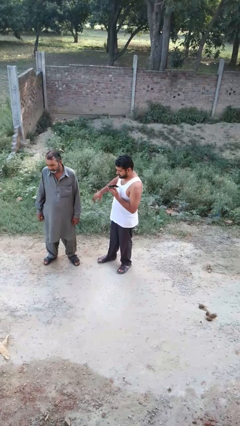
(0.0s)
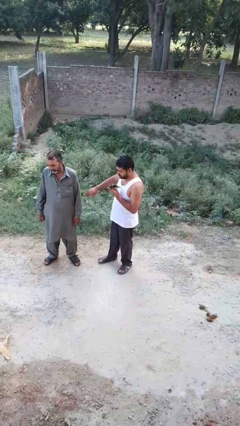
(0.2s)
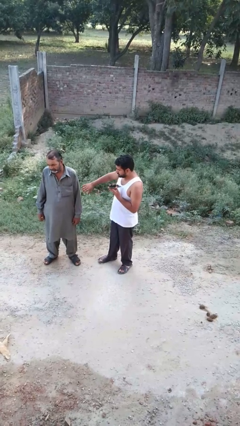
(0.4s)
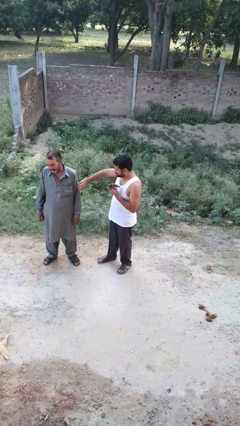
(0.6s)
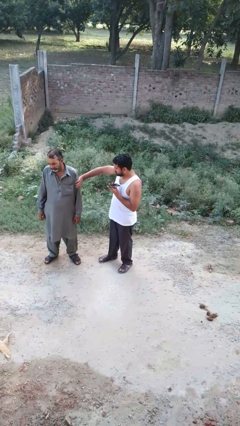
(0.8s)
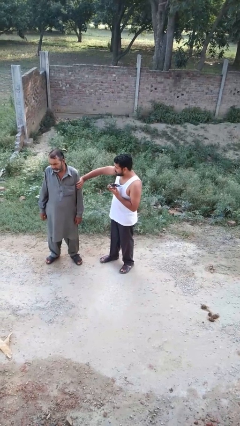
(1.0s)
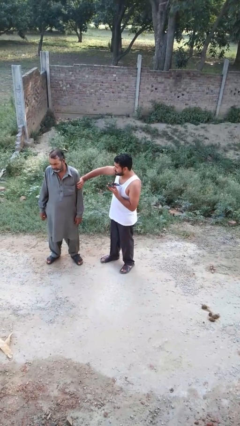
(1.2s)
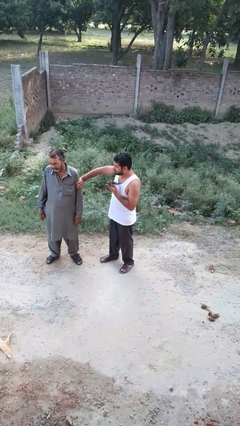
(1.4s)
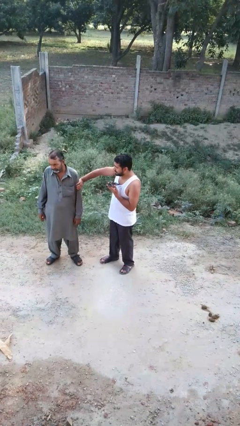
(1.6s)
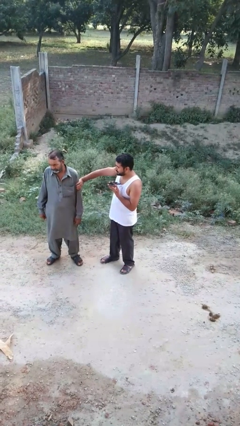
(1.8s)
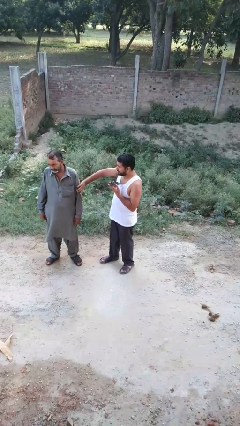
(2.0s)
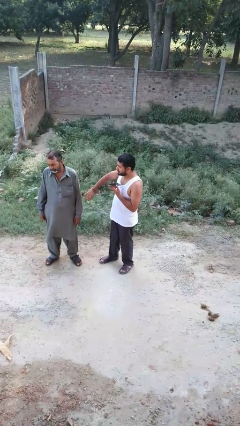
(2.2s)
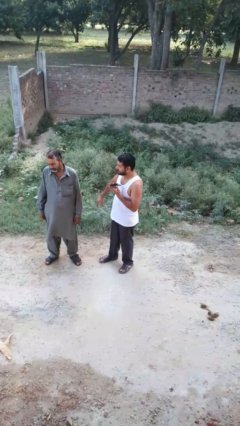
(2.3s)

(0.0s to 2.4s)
person grabs person by bicep

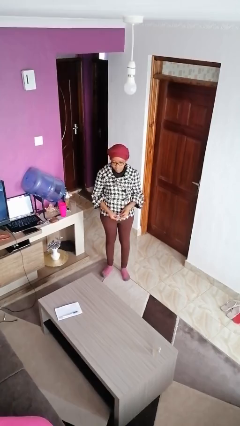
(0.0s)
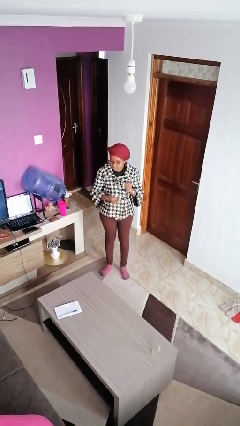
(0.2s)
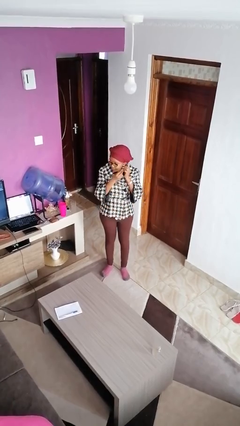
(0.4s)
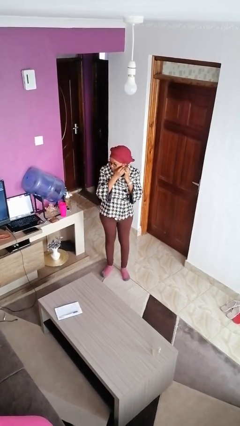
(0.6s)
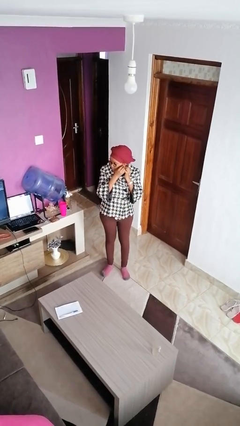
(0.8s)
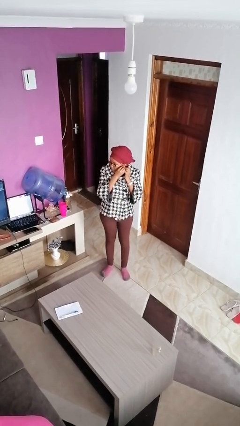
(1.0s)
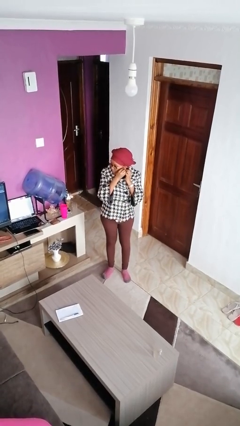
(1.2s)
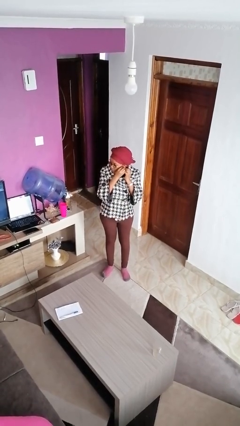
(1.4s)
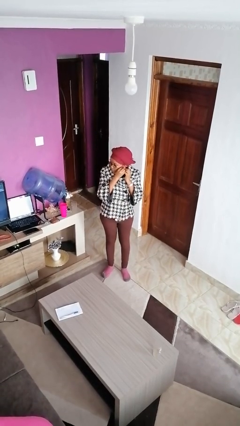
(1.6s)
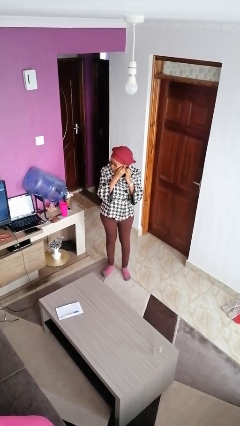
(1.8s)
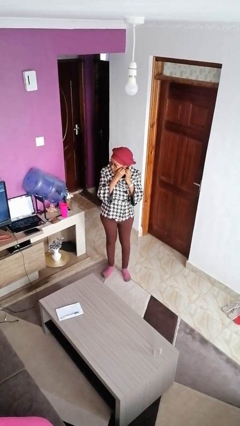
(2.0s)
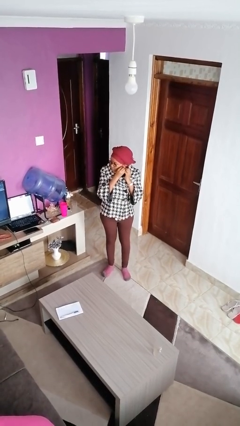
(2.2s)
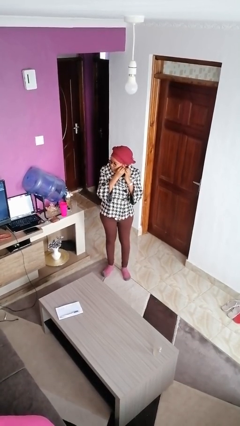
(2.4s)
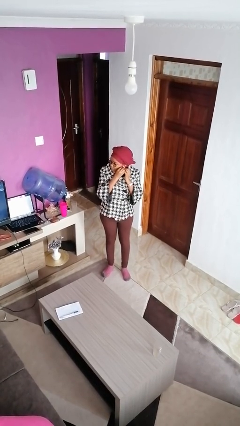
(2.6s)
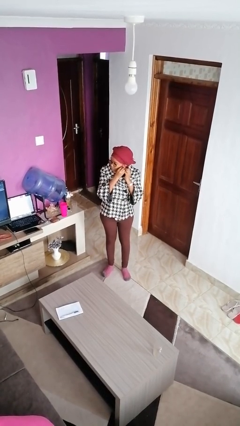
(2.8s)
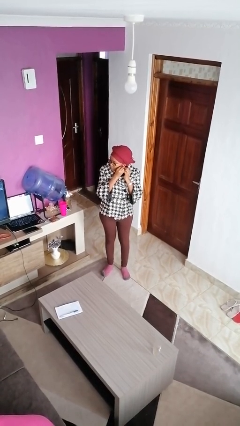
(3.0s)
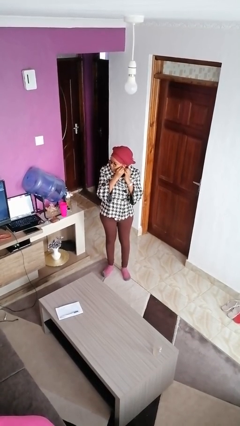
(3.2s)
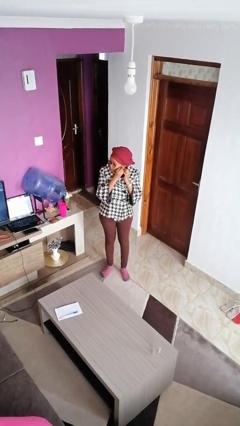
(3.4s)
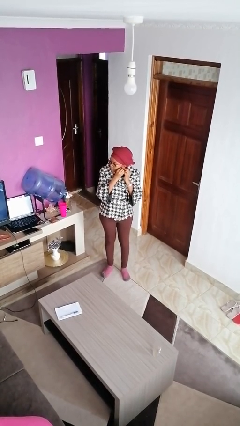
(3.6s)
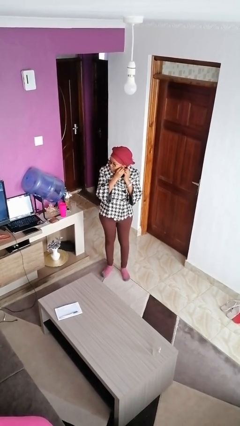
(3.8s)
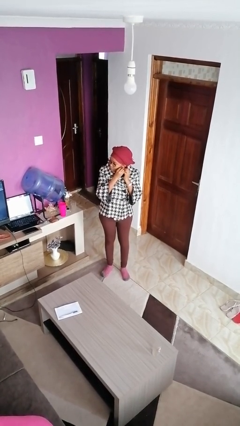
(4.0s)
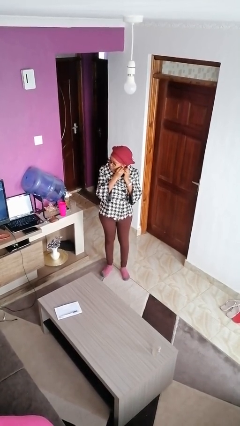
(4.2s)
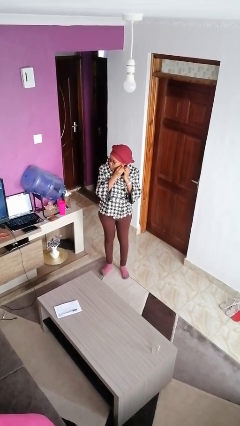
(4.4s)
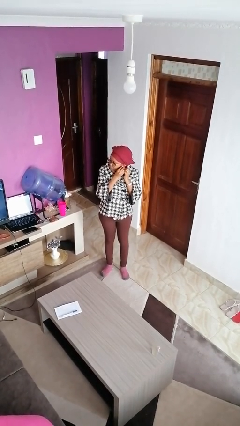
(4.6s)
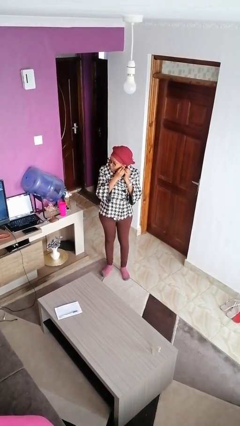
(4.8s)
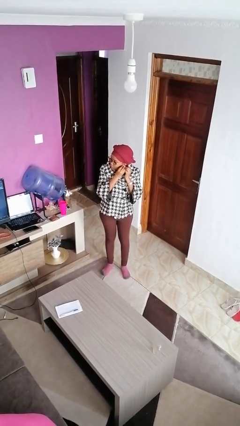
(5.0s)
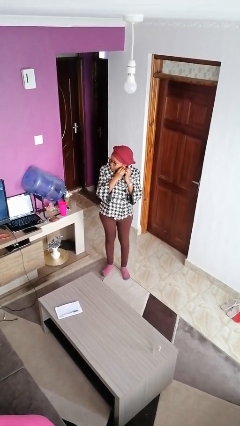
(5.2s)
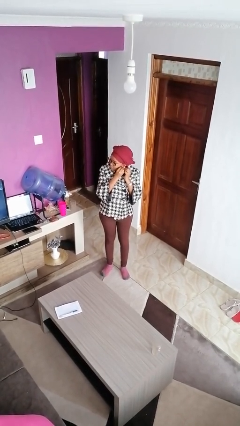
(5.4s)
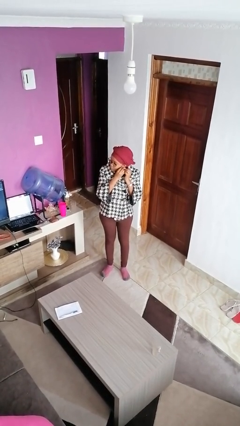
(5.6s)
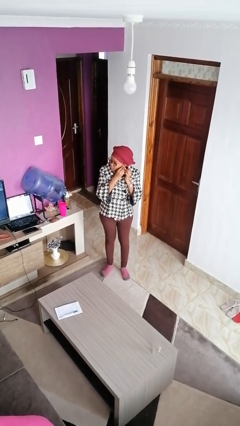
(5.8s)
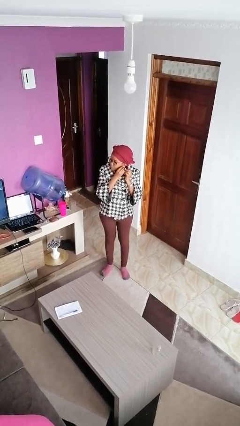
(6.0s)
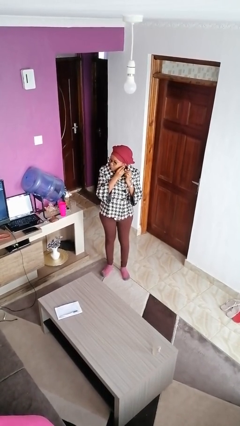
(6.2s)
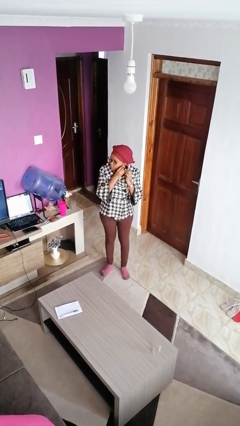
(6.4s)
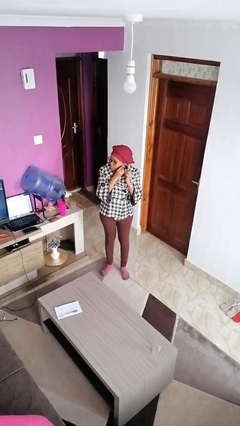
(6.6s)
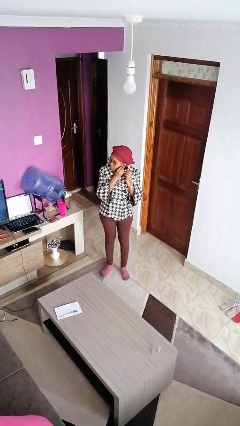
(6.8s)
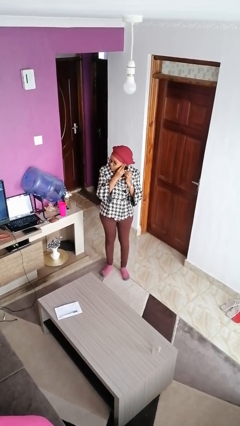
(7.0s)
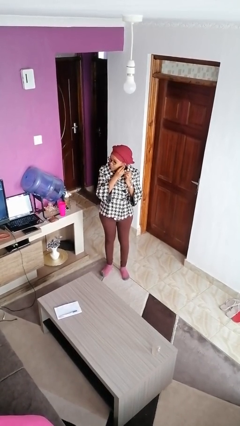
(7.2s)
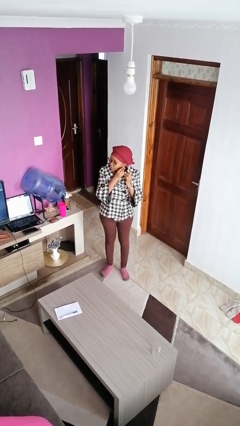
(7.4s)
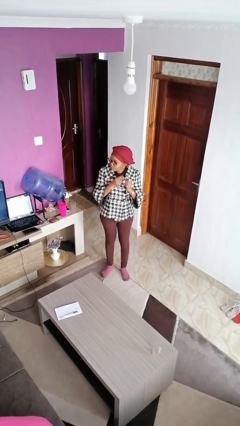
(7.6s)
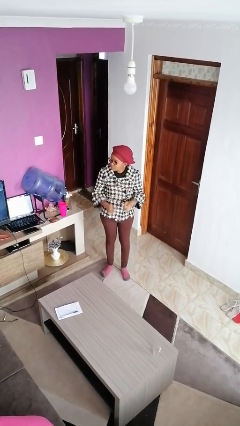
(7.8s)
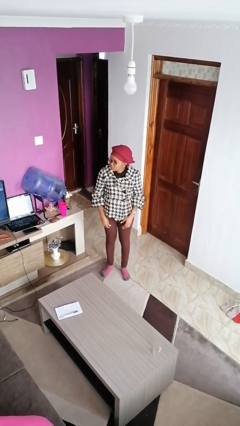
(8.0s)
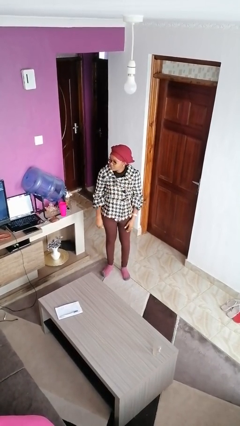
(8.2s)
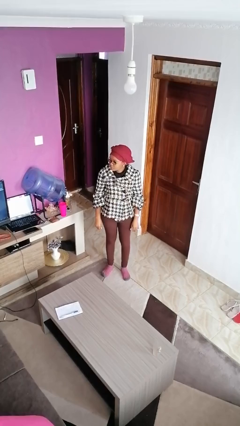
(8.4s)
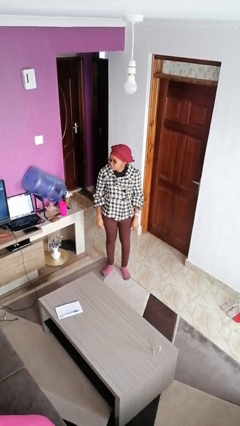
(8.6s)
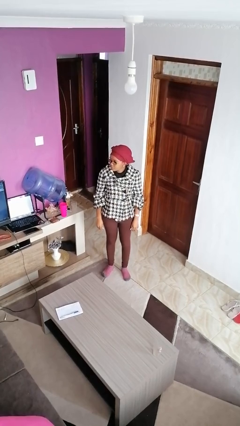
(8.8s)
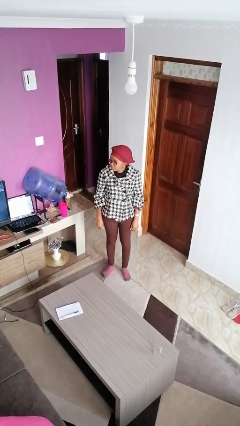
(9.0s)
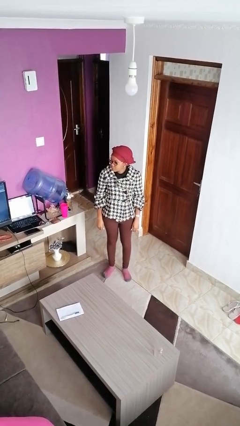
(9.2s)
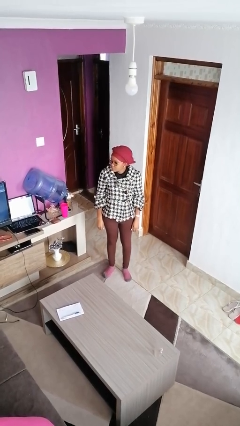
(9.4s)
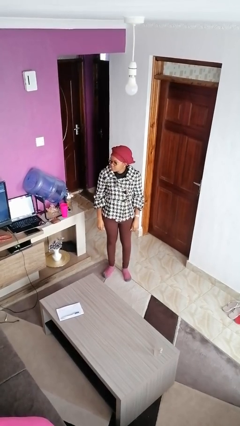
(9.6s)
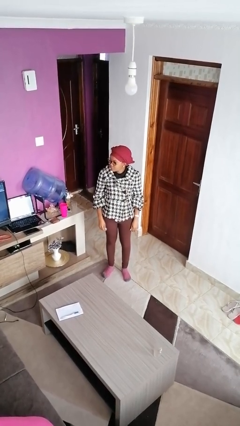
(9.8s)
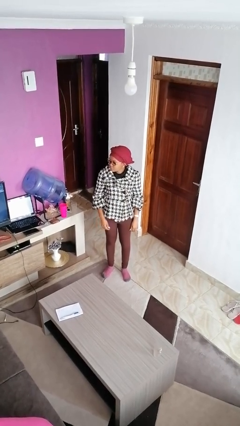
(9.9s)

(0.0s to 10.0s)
person puts on earrings

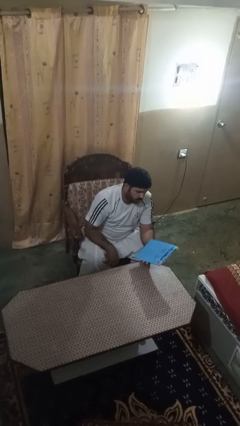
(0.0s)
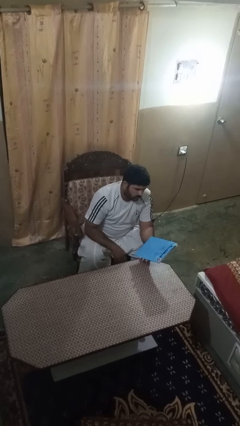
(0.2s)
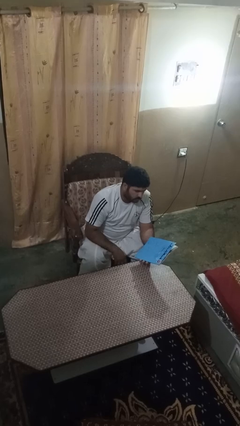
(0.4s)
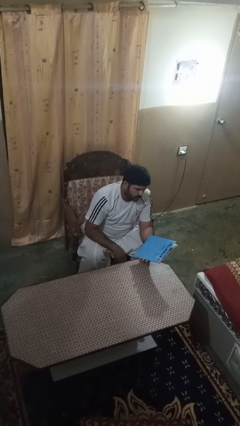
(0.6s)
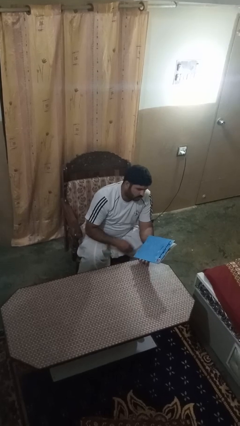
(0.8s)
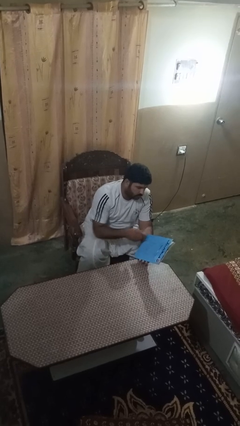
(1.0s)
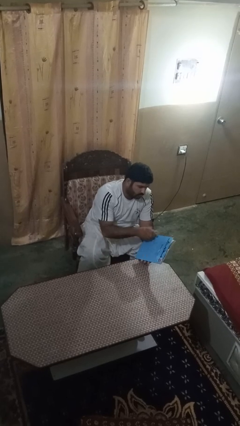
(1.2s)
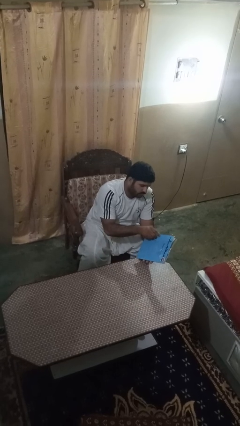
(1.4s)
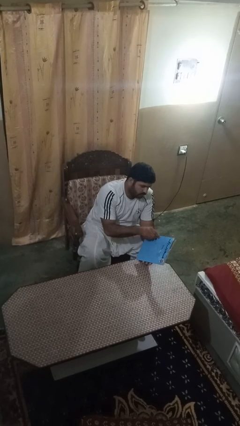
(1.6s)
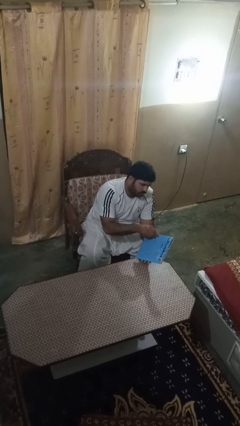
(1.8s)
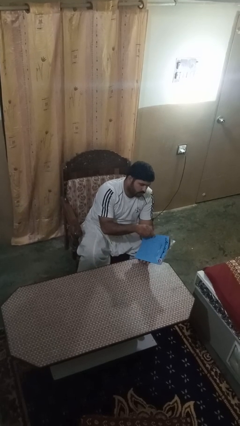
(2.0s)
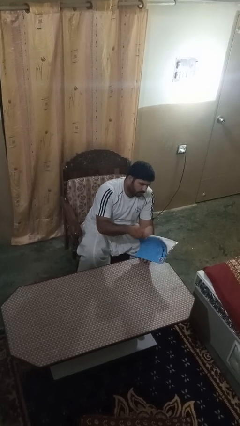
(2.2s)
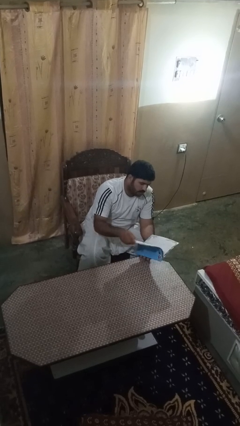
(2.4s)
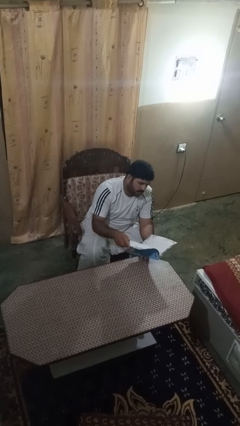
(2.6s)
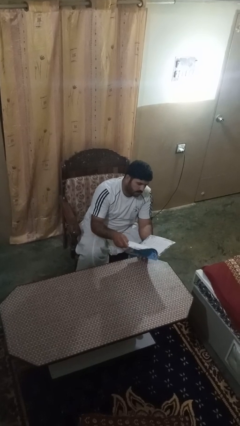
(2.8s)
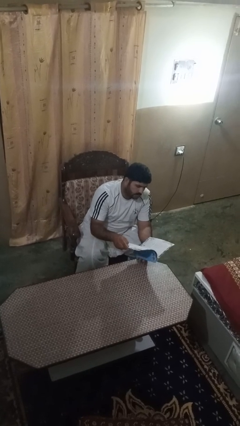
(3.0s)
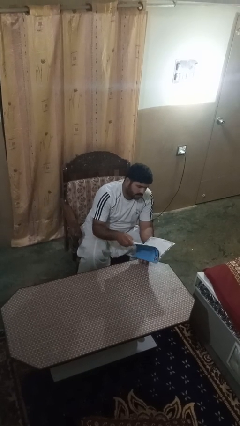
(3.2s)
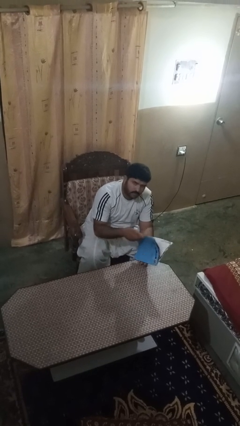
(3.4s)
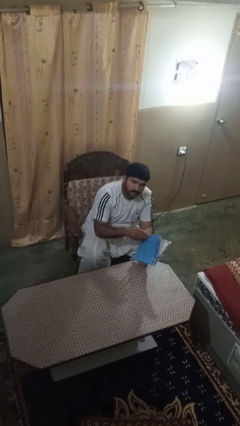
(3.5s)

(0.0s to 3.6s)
person reads magazine

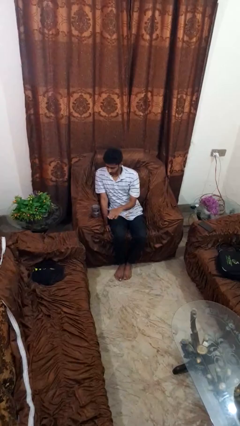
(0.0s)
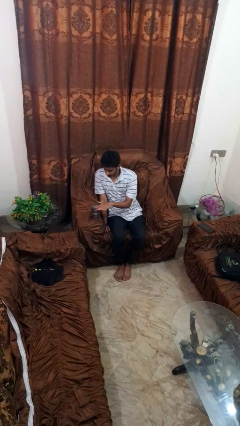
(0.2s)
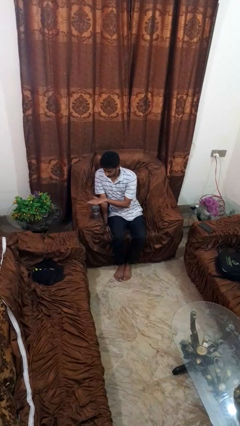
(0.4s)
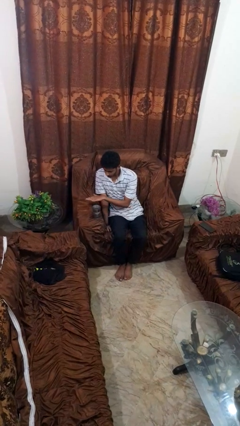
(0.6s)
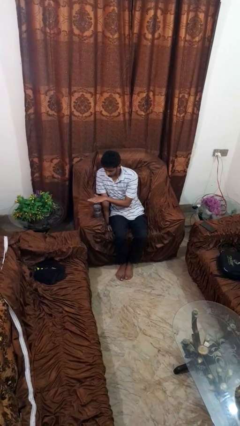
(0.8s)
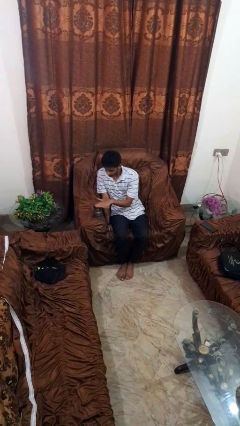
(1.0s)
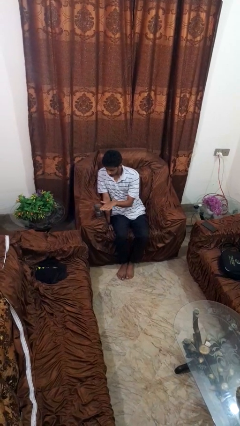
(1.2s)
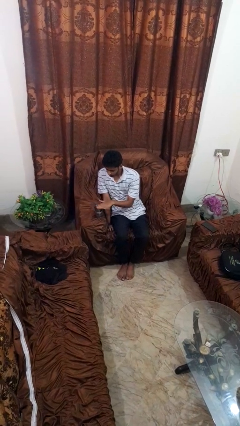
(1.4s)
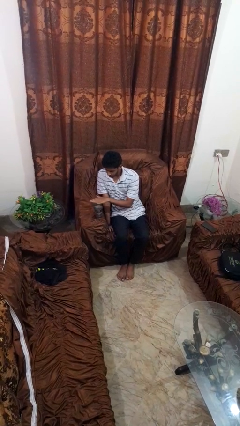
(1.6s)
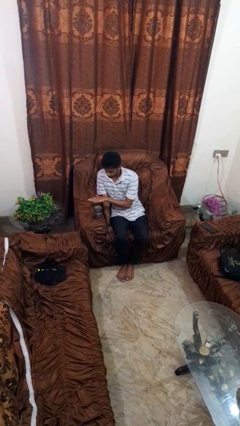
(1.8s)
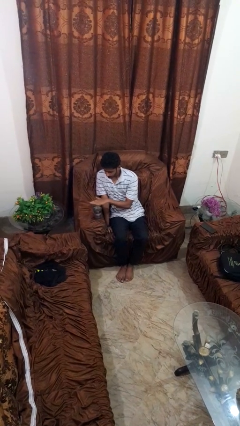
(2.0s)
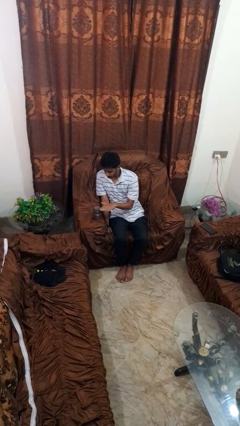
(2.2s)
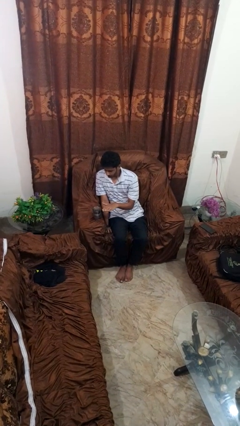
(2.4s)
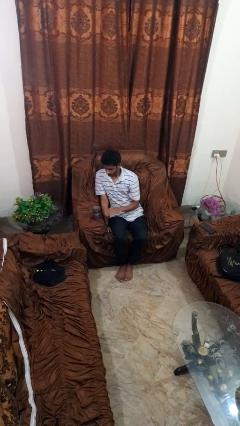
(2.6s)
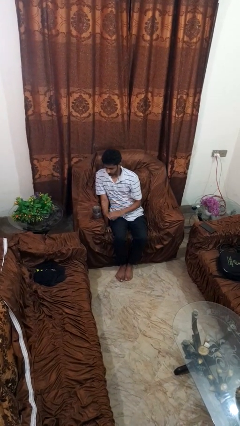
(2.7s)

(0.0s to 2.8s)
person waves hand over object
